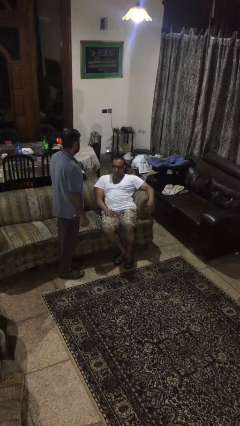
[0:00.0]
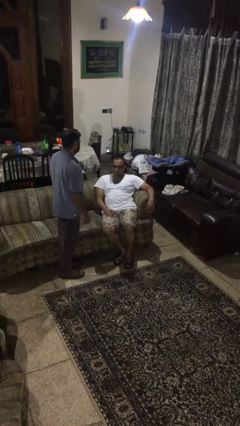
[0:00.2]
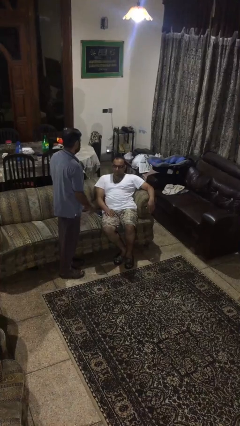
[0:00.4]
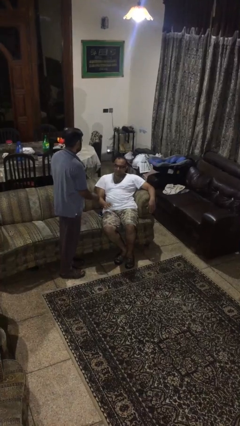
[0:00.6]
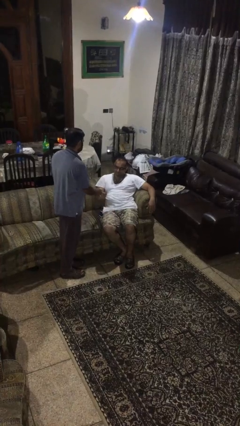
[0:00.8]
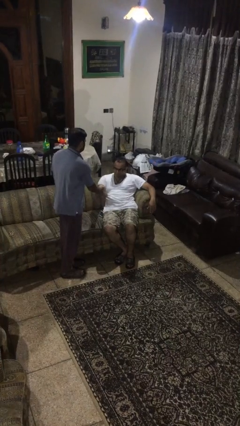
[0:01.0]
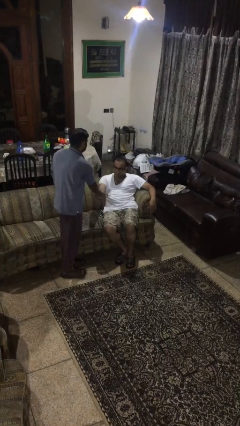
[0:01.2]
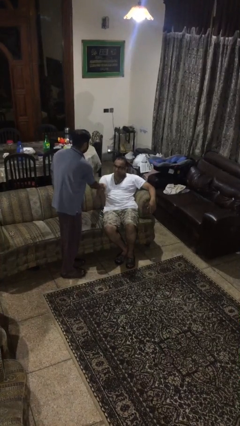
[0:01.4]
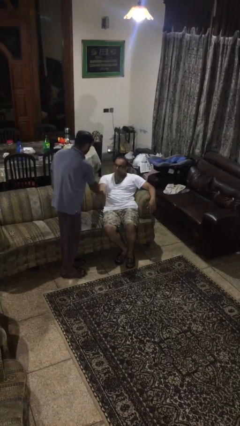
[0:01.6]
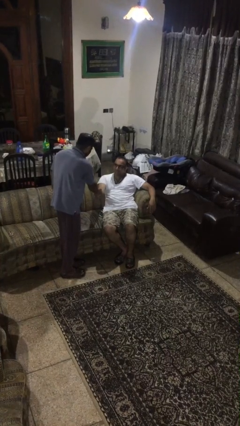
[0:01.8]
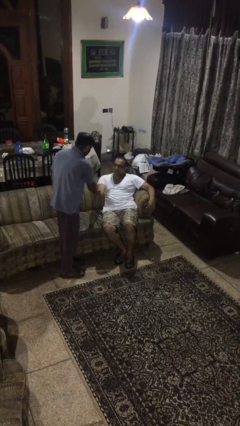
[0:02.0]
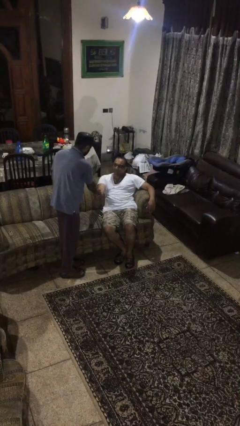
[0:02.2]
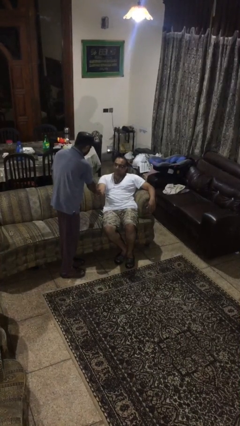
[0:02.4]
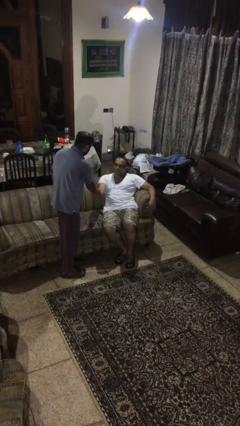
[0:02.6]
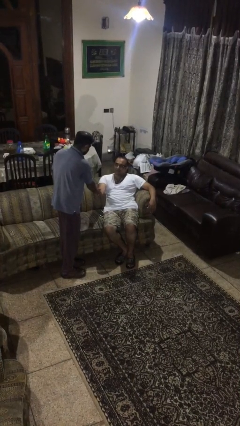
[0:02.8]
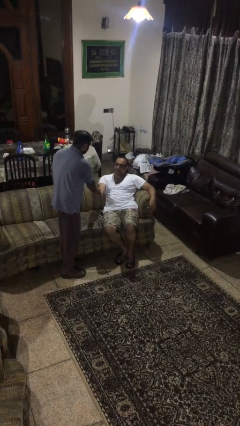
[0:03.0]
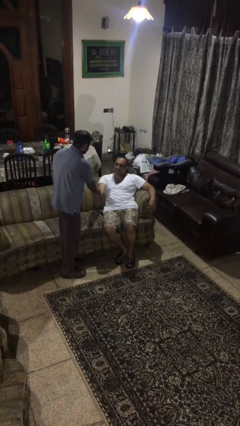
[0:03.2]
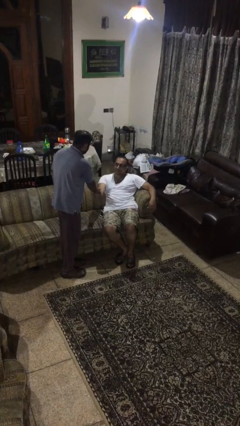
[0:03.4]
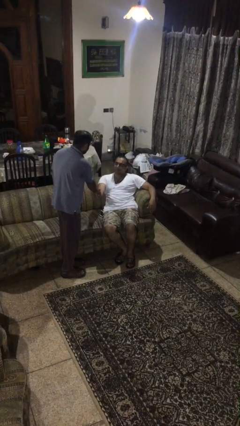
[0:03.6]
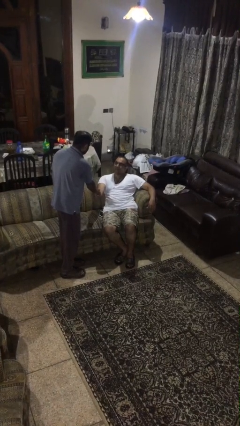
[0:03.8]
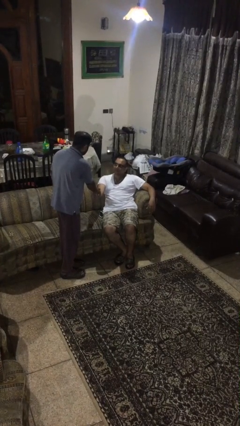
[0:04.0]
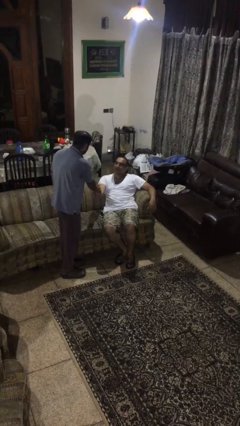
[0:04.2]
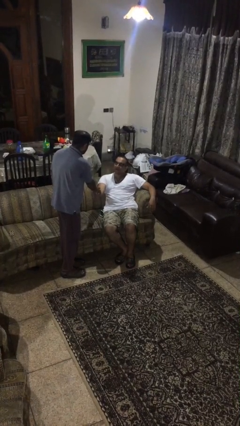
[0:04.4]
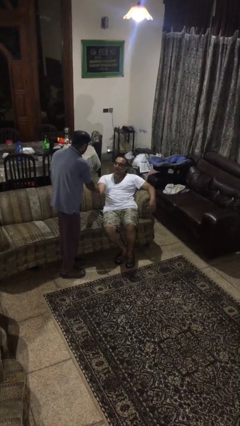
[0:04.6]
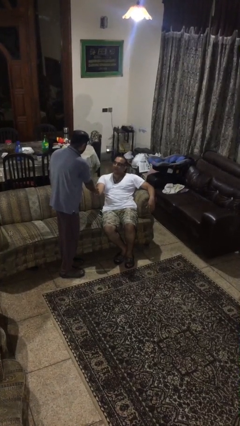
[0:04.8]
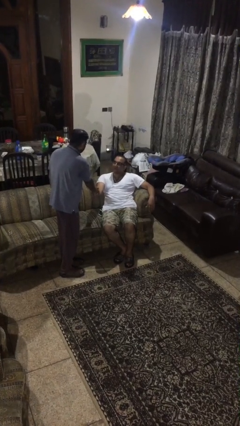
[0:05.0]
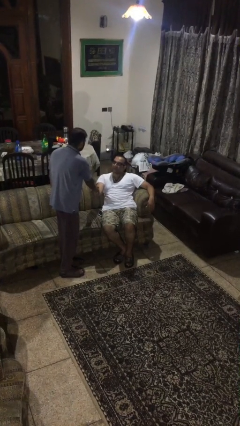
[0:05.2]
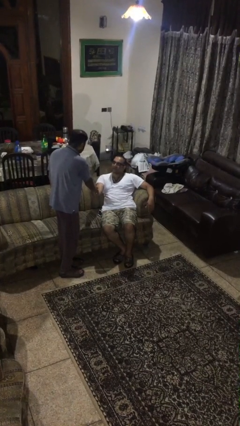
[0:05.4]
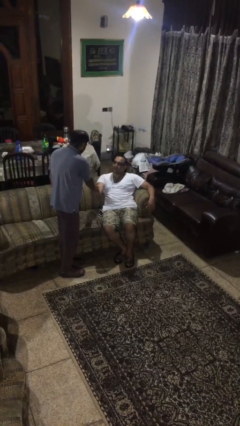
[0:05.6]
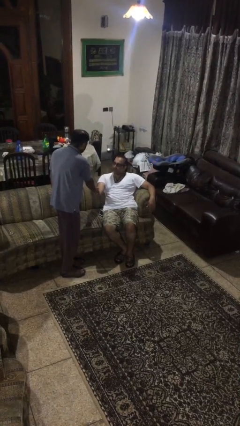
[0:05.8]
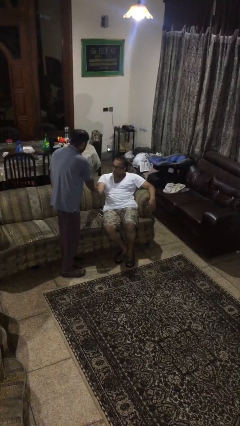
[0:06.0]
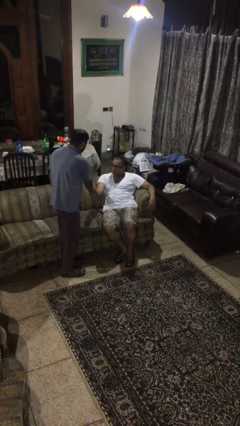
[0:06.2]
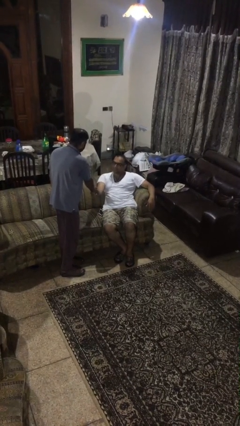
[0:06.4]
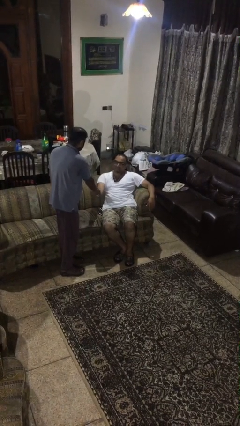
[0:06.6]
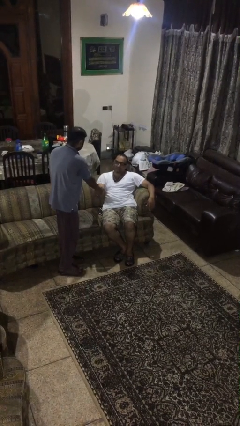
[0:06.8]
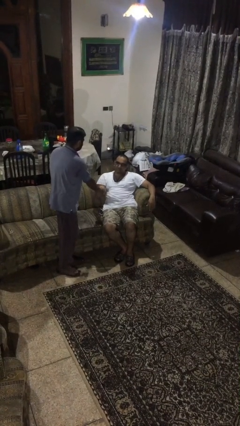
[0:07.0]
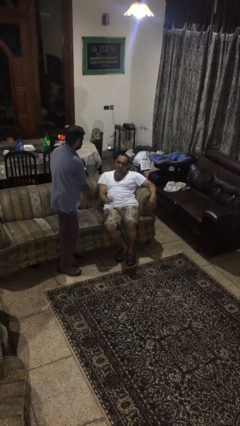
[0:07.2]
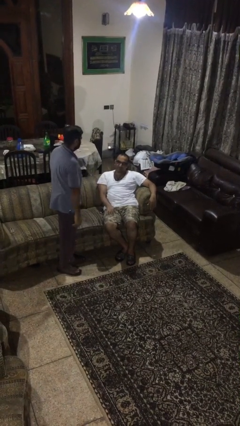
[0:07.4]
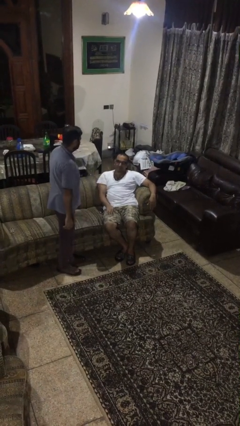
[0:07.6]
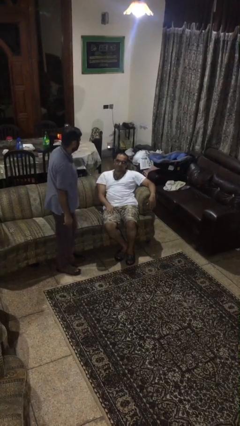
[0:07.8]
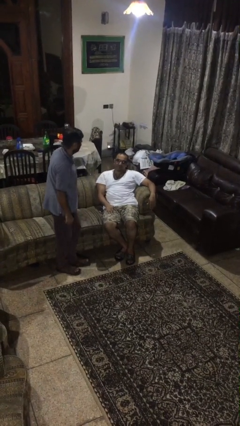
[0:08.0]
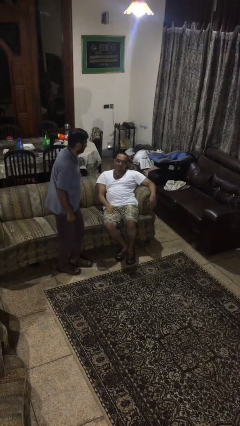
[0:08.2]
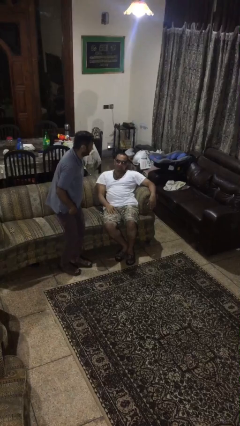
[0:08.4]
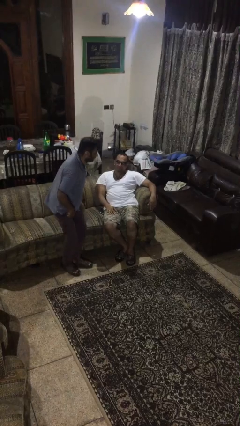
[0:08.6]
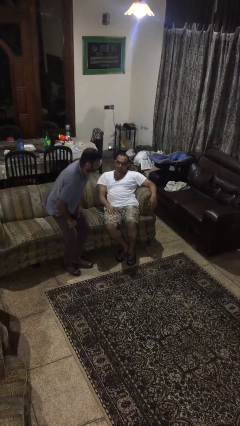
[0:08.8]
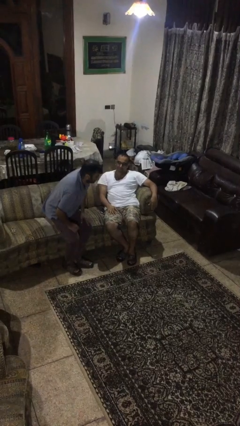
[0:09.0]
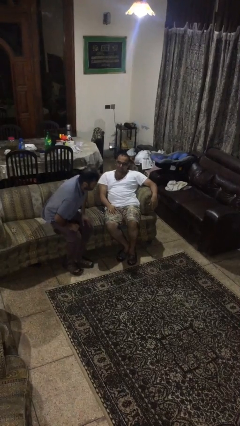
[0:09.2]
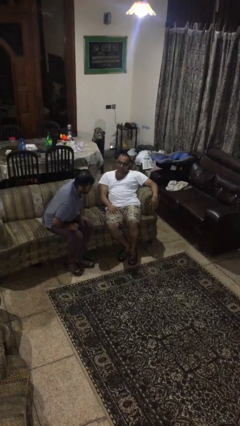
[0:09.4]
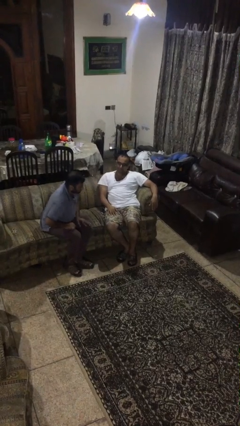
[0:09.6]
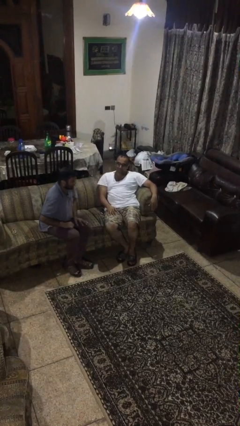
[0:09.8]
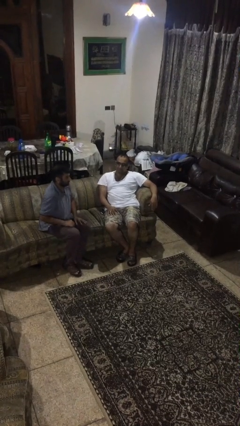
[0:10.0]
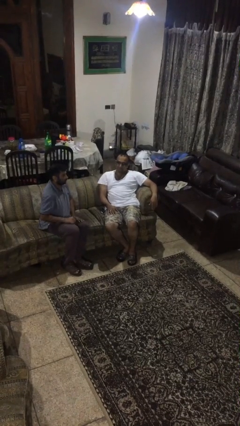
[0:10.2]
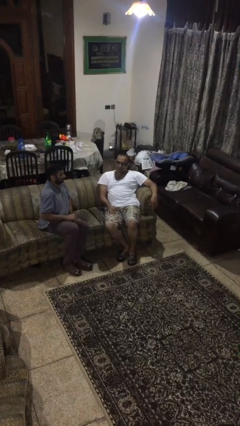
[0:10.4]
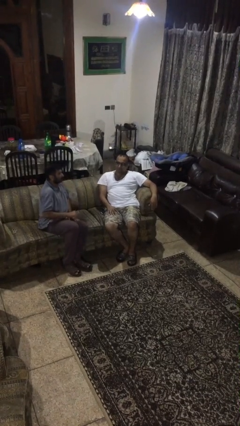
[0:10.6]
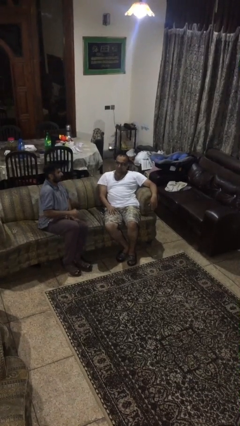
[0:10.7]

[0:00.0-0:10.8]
person shakes hand

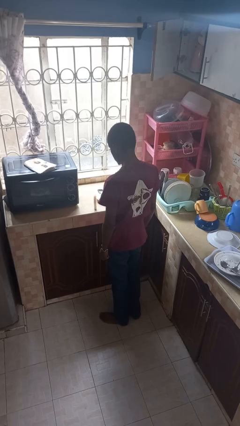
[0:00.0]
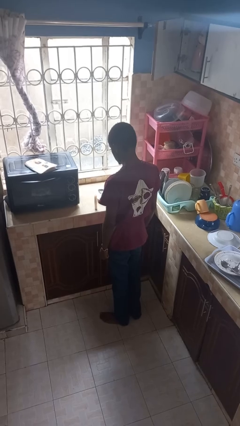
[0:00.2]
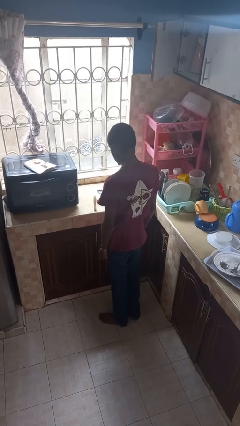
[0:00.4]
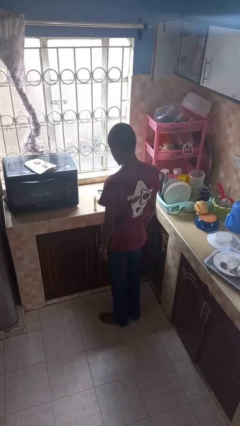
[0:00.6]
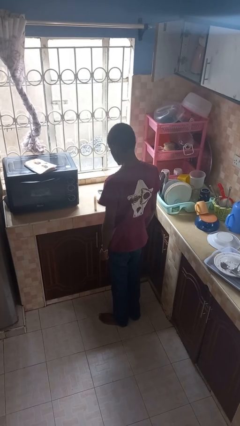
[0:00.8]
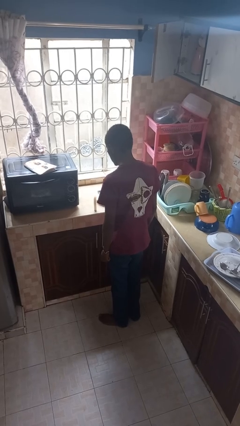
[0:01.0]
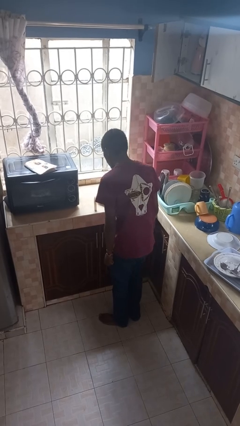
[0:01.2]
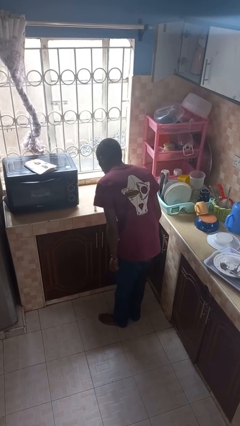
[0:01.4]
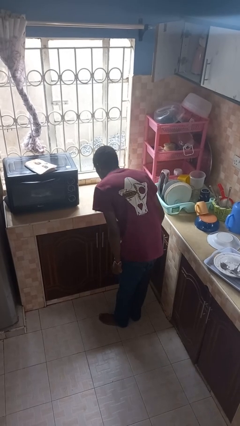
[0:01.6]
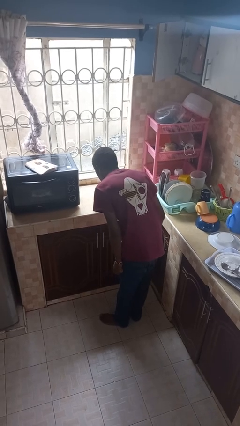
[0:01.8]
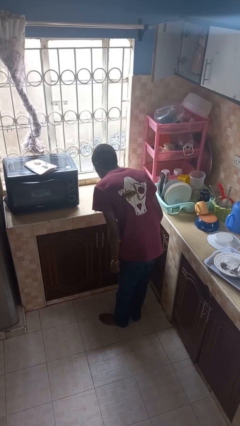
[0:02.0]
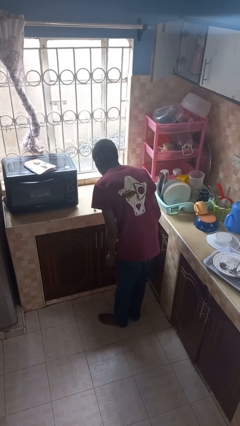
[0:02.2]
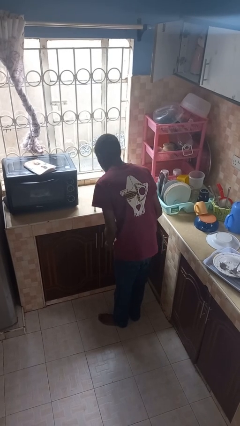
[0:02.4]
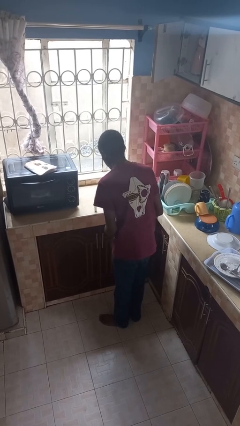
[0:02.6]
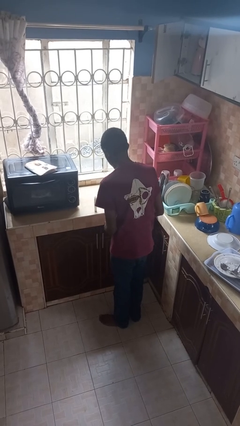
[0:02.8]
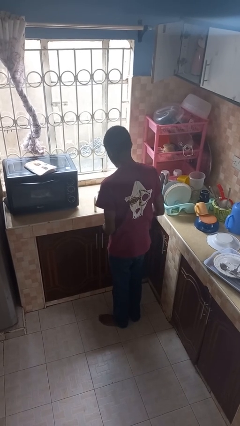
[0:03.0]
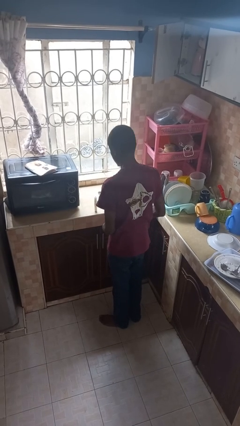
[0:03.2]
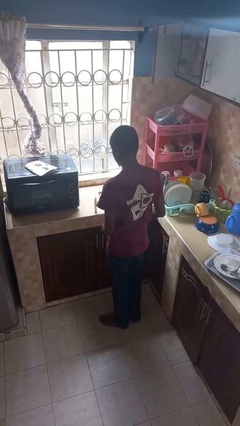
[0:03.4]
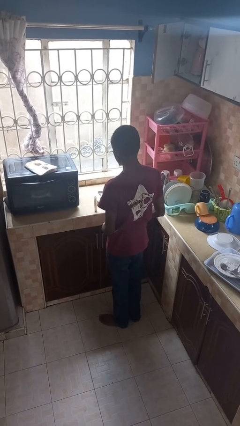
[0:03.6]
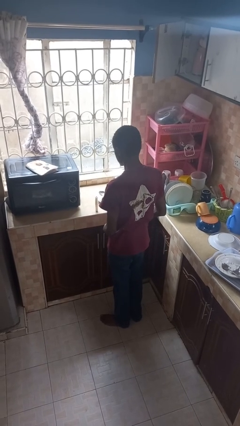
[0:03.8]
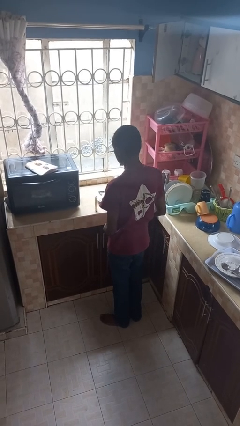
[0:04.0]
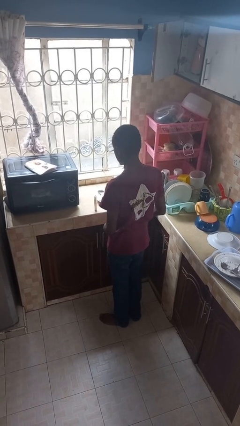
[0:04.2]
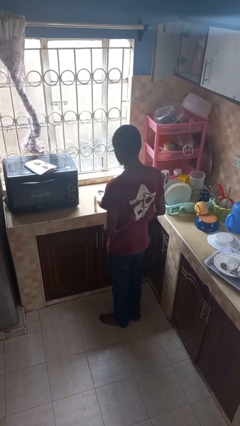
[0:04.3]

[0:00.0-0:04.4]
person extinguishes candle

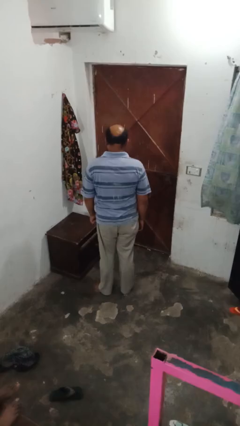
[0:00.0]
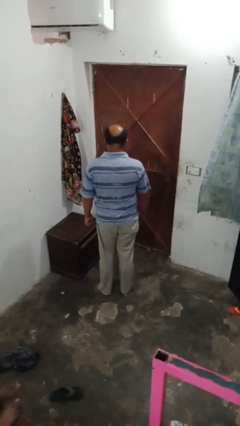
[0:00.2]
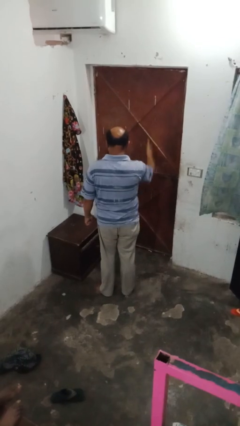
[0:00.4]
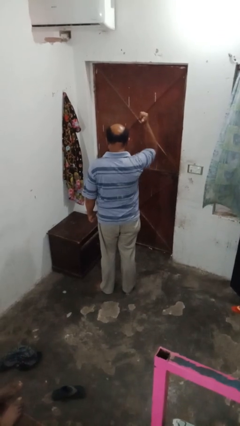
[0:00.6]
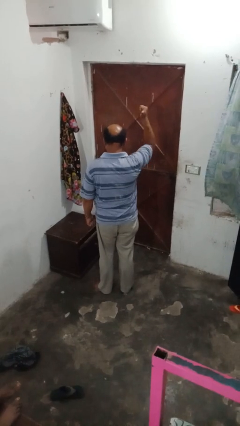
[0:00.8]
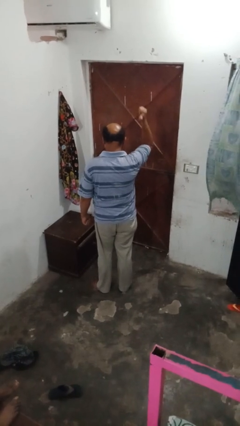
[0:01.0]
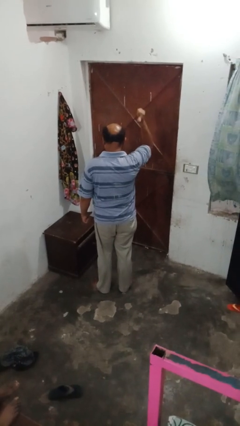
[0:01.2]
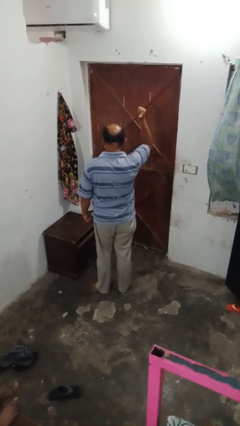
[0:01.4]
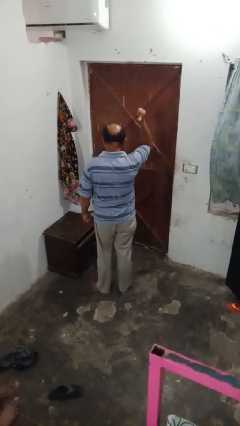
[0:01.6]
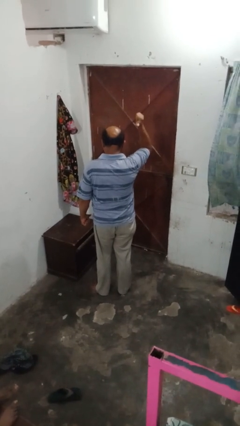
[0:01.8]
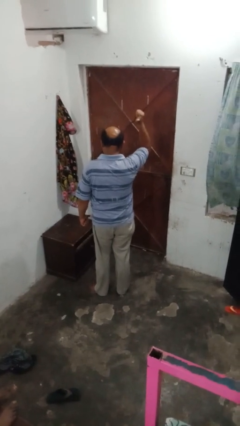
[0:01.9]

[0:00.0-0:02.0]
person gestures behind me

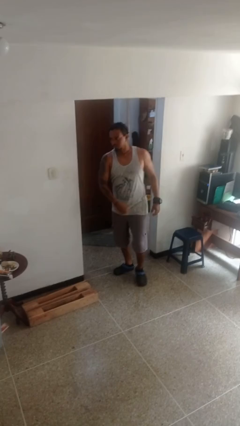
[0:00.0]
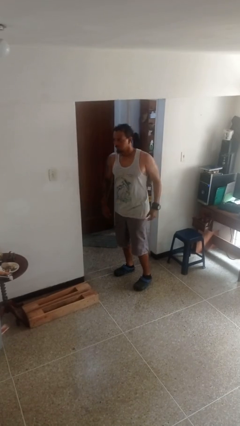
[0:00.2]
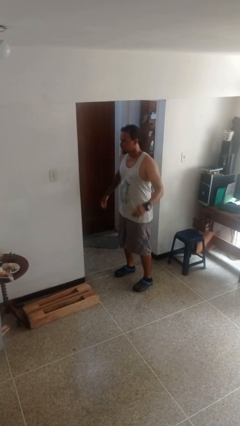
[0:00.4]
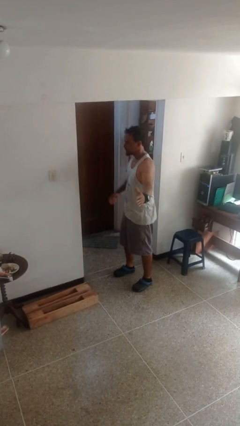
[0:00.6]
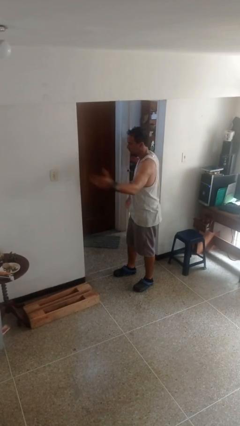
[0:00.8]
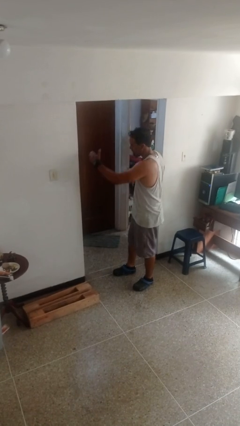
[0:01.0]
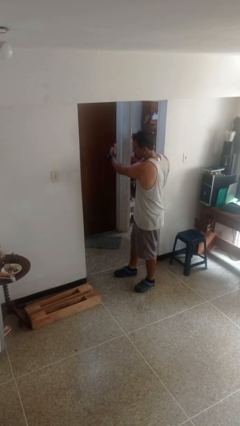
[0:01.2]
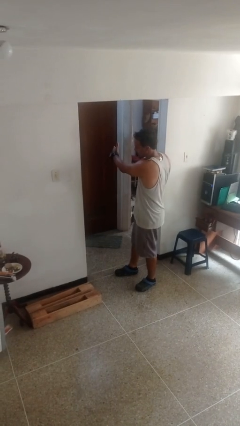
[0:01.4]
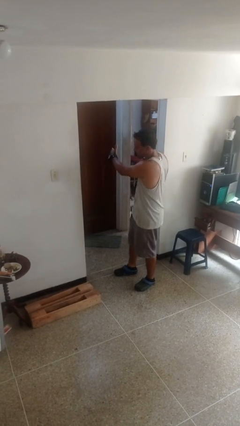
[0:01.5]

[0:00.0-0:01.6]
person gestures swipe right
